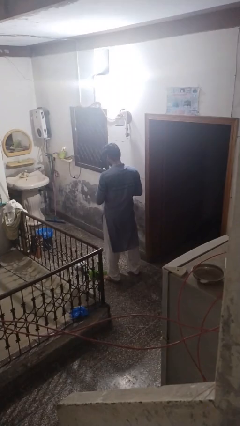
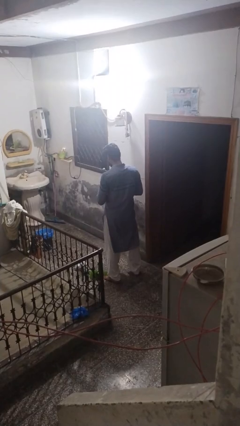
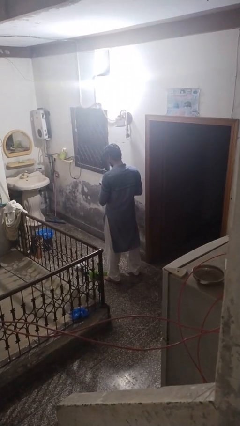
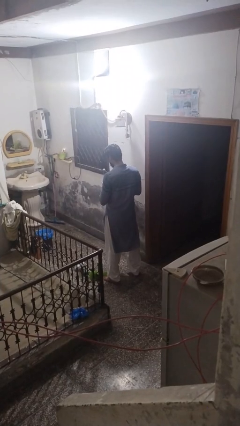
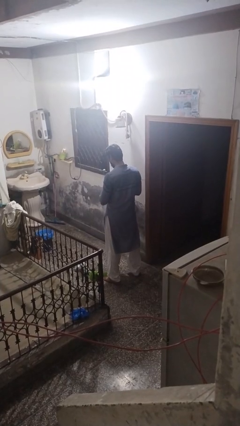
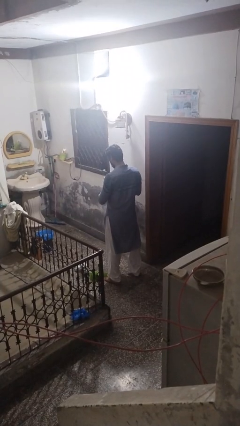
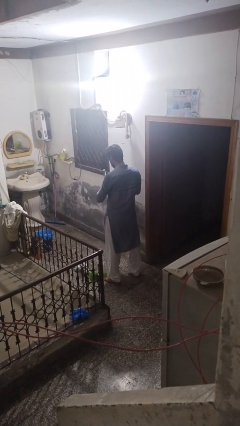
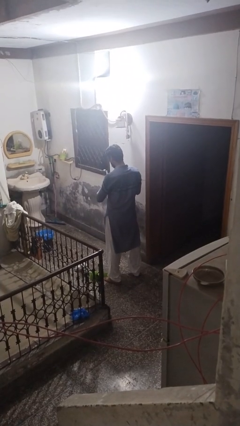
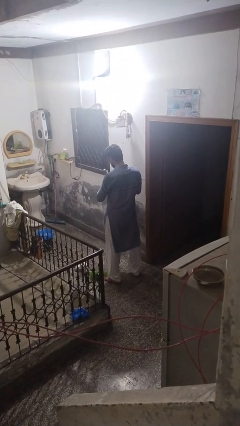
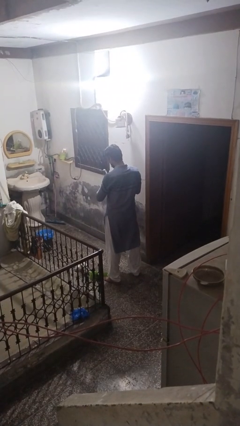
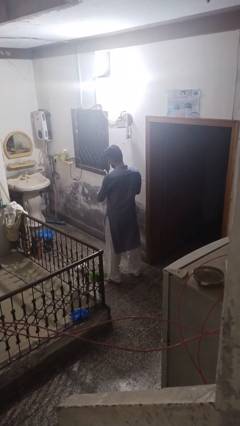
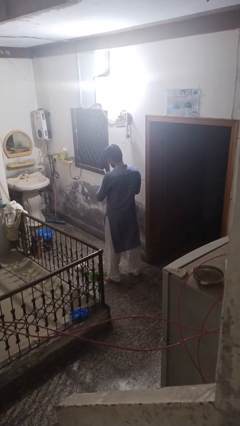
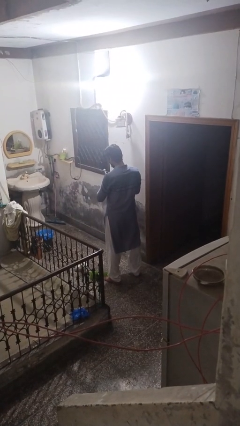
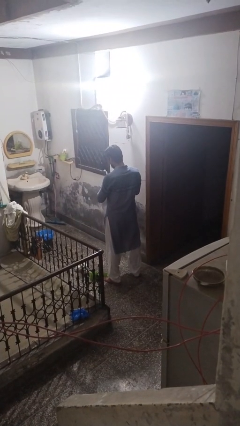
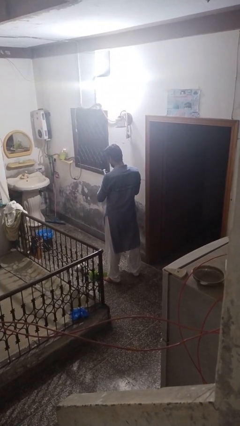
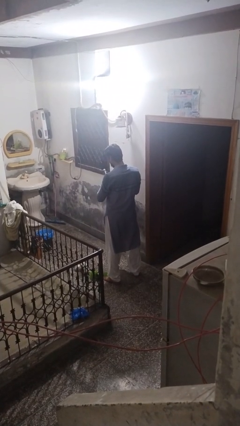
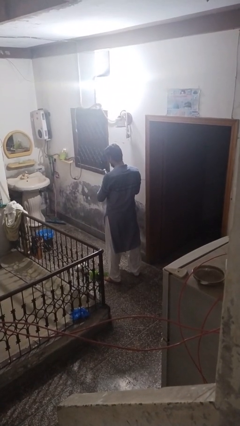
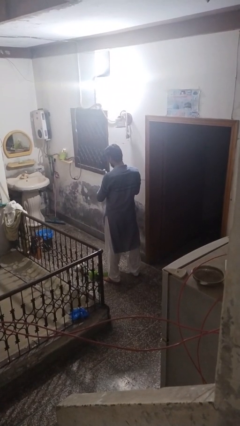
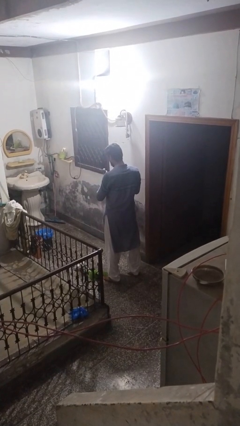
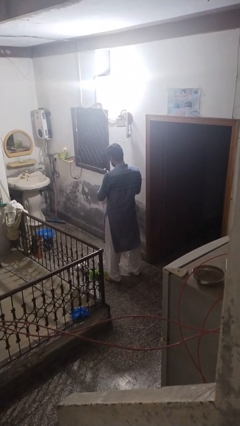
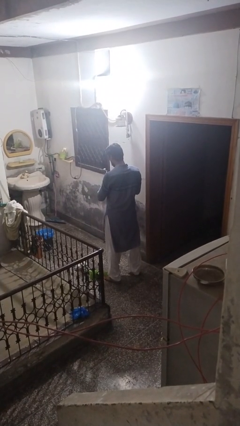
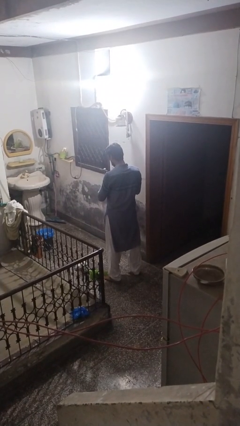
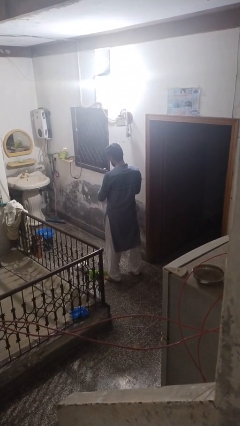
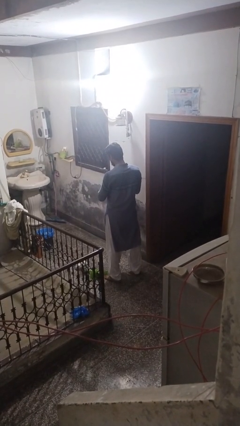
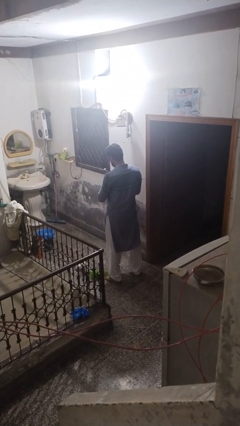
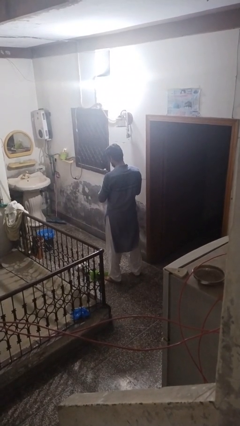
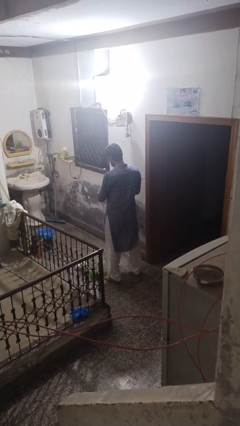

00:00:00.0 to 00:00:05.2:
person puts on ring

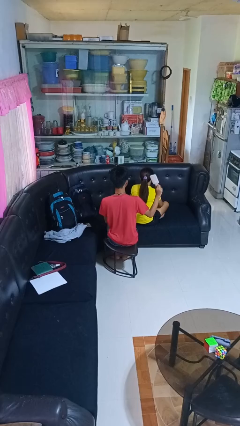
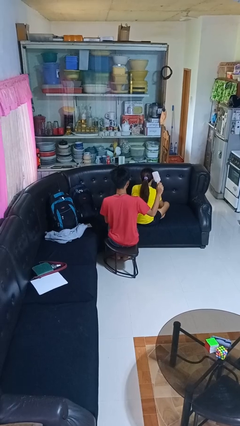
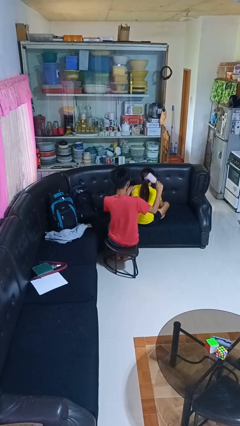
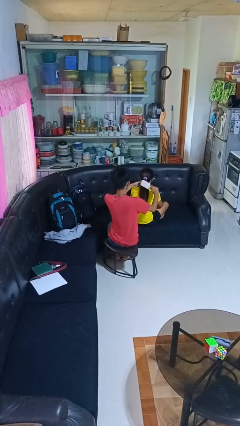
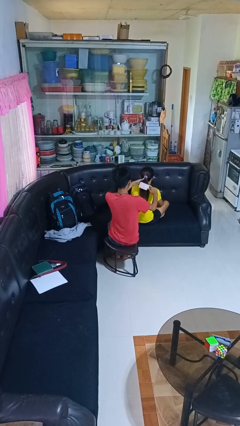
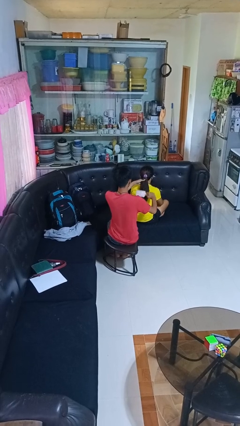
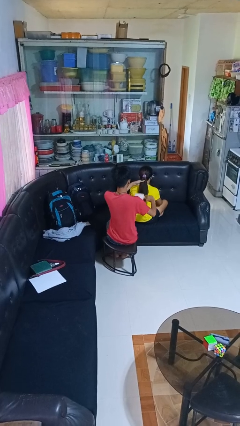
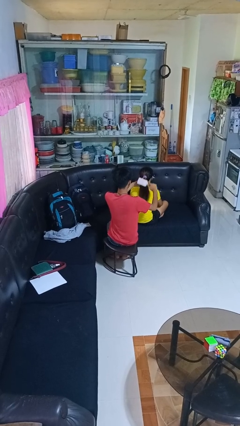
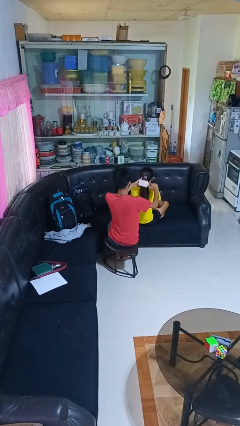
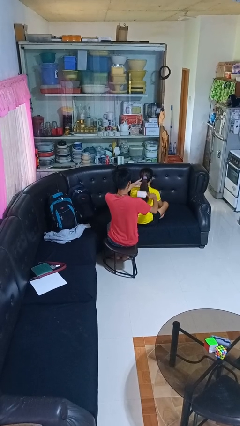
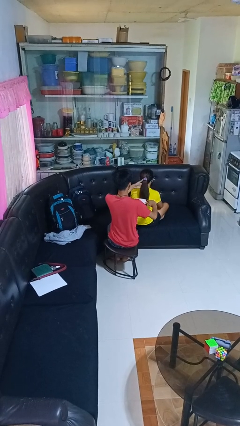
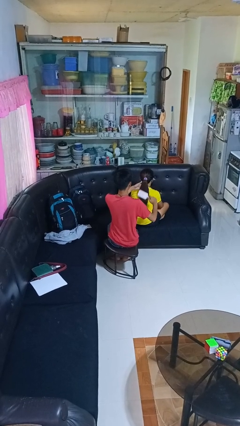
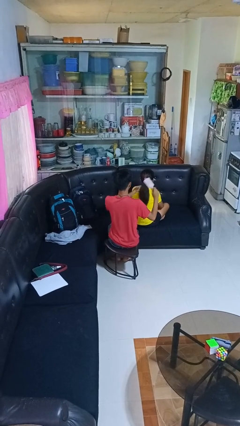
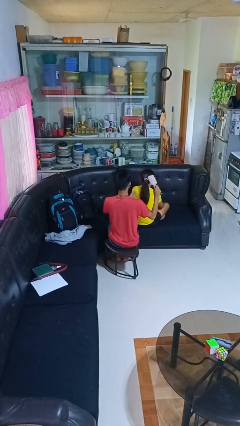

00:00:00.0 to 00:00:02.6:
person brushes hair of person

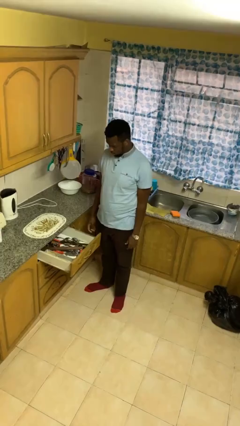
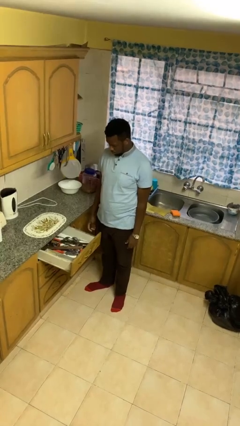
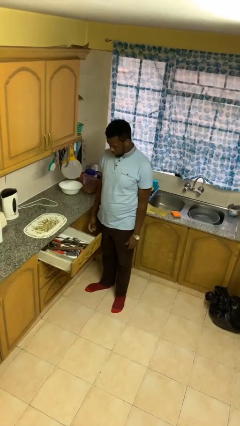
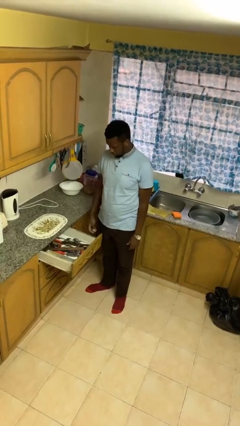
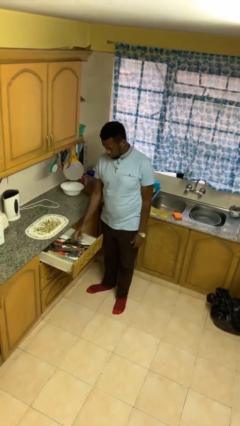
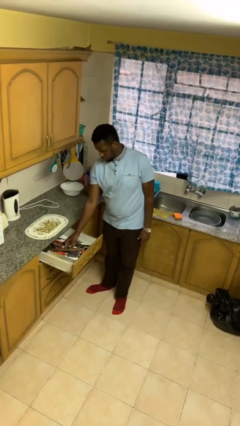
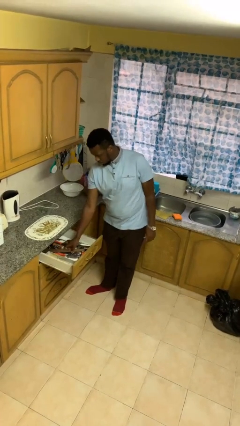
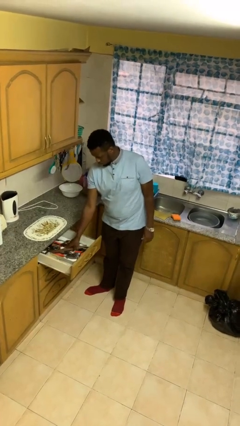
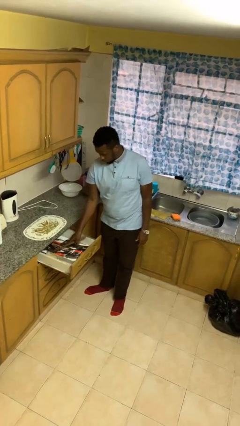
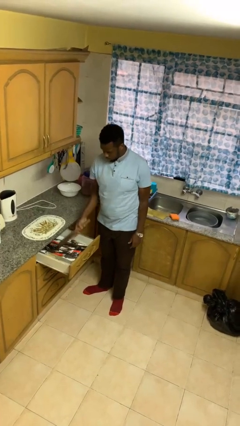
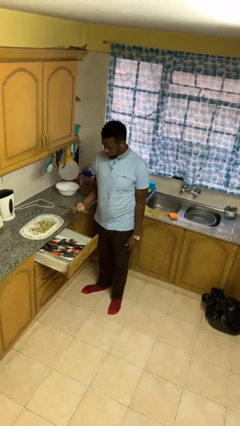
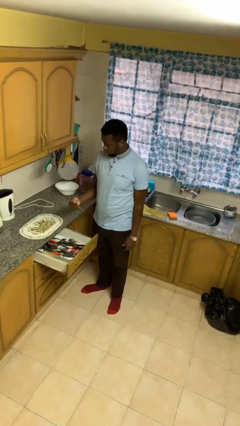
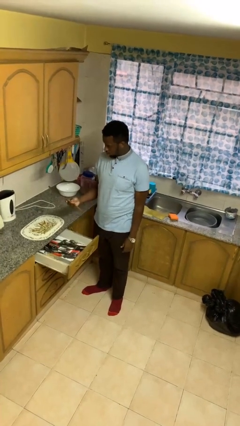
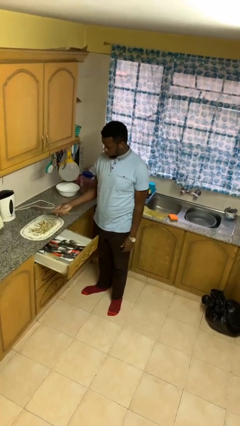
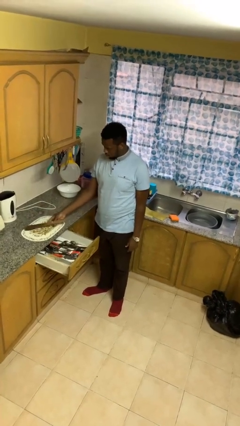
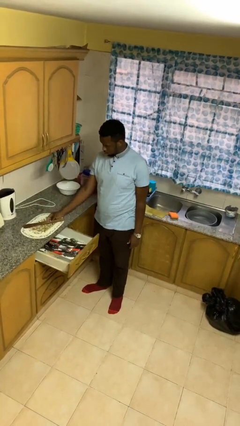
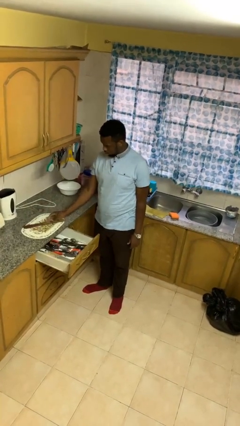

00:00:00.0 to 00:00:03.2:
person takes object from kitchen drawer

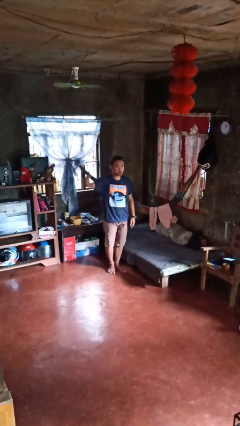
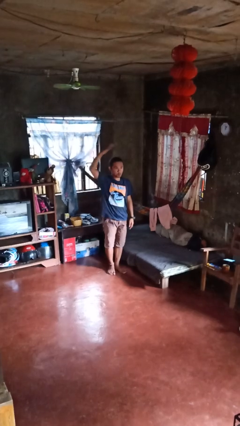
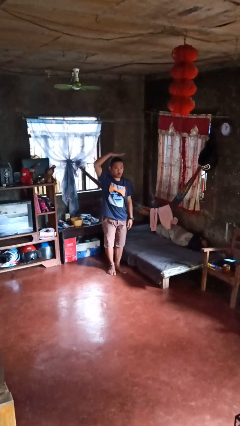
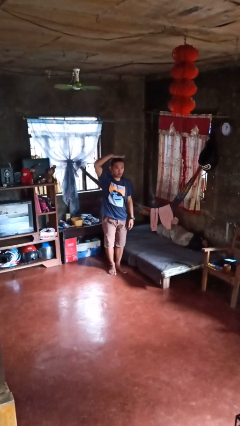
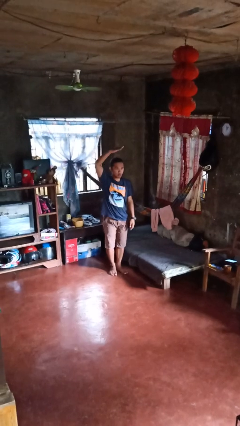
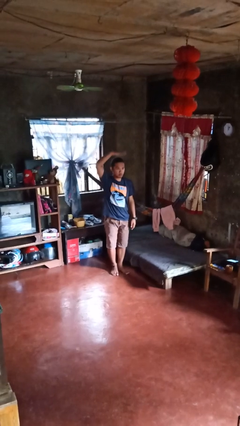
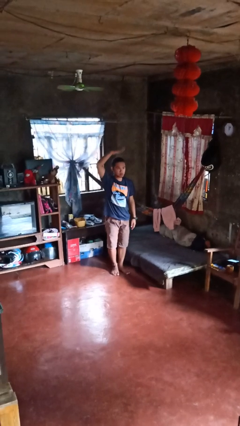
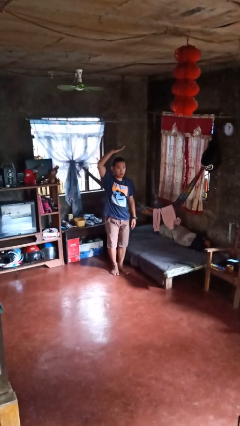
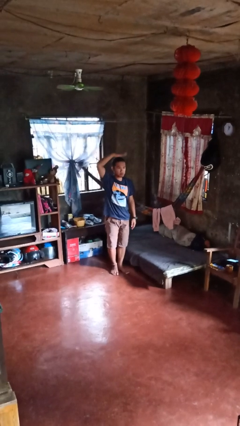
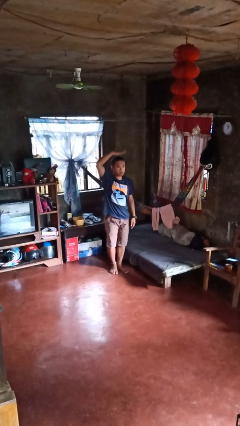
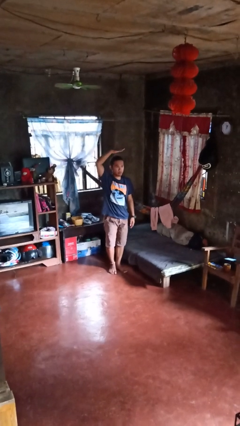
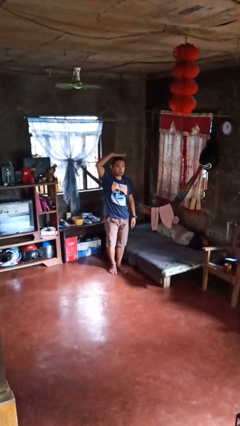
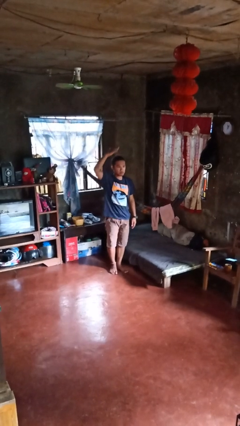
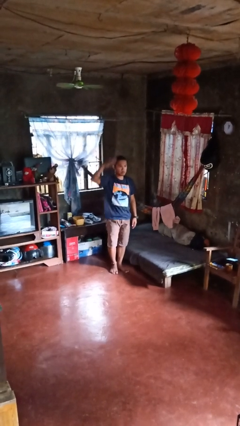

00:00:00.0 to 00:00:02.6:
person pats head

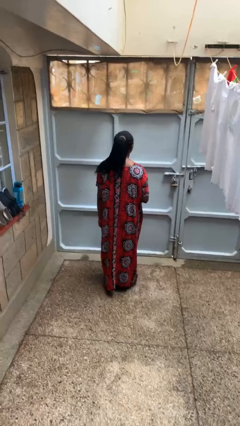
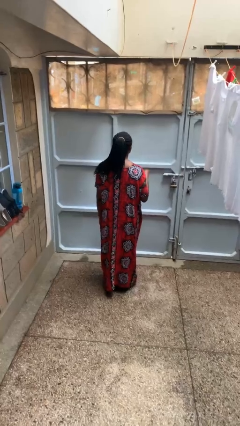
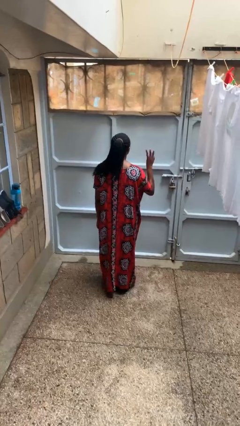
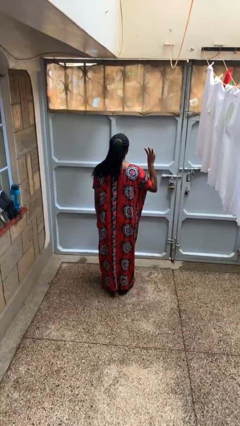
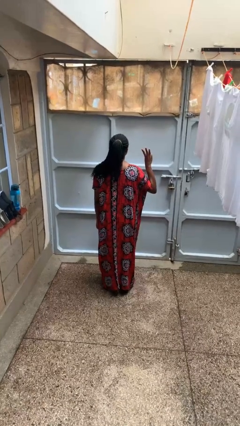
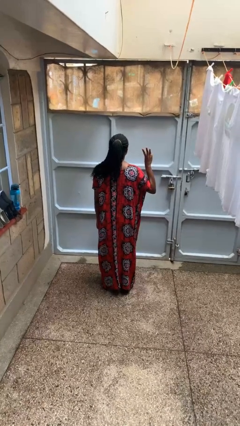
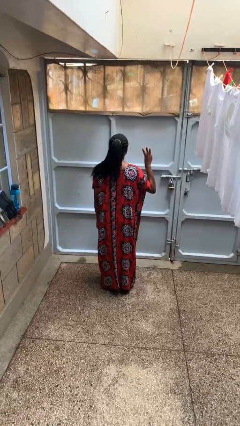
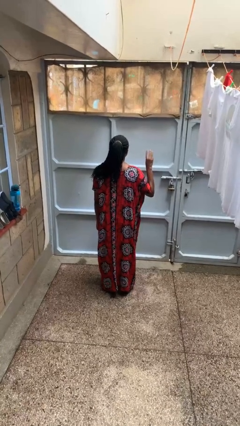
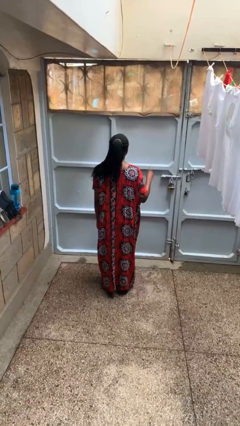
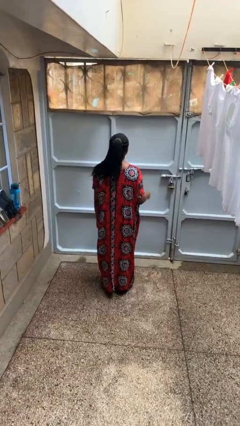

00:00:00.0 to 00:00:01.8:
person gestures number three

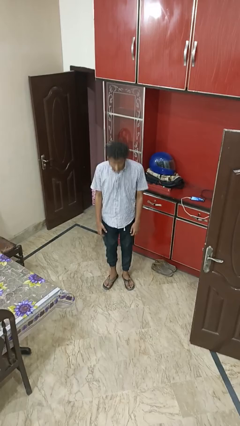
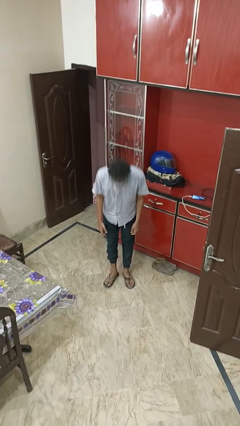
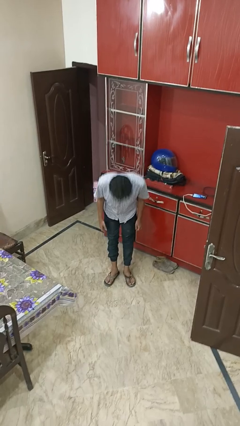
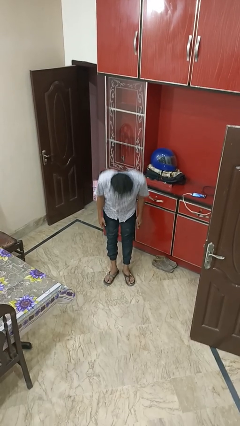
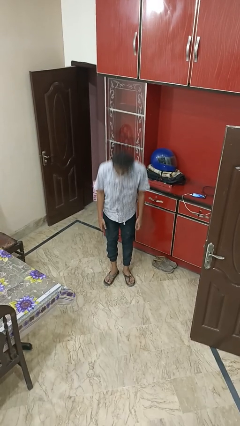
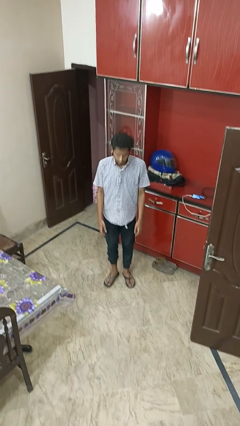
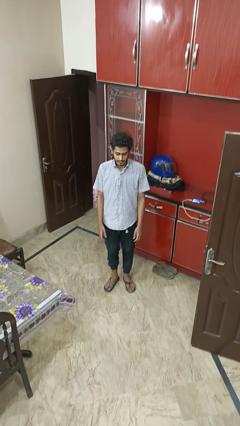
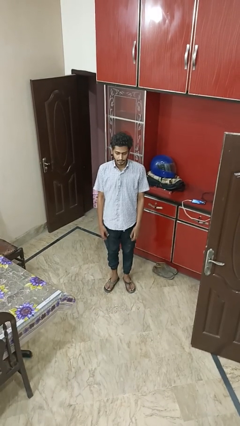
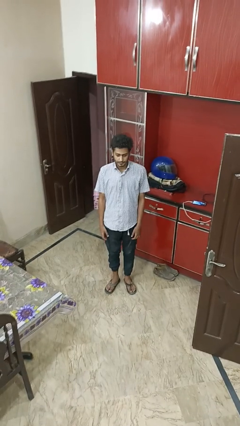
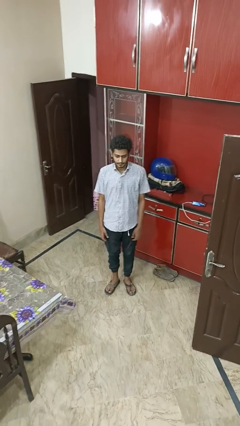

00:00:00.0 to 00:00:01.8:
person bows
